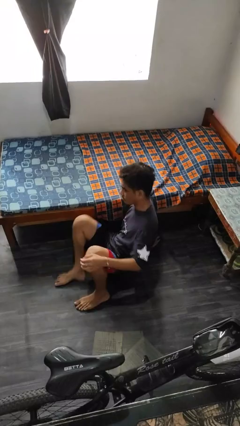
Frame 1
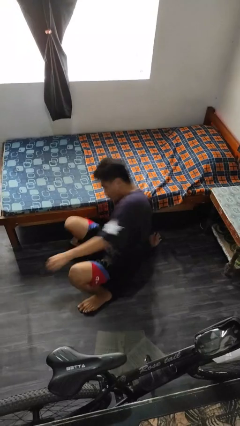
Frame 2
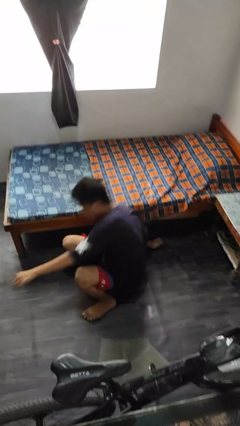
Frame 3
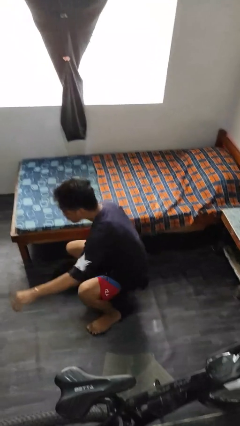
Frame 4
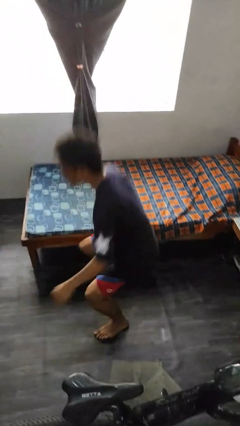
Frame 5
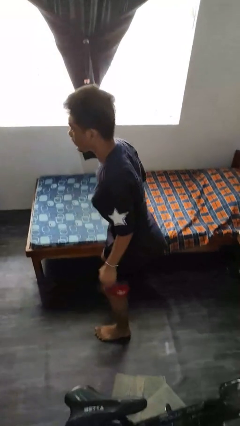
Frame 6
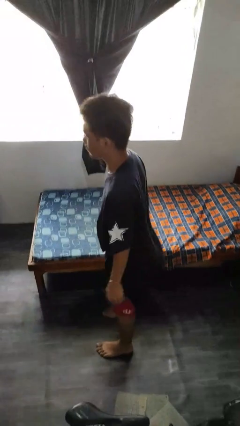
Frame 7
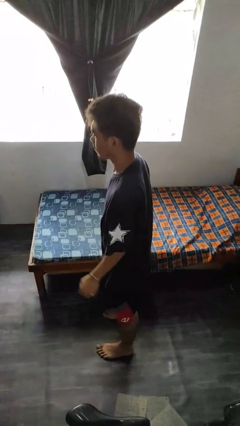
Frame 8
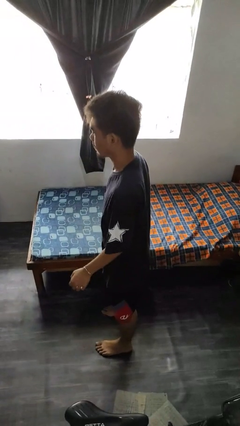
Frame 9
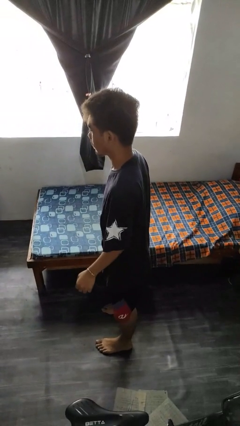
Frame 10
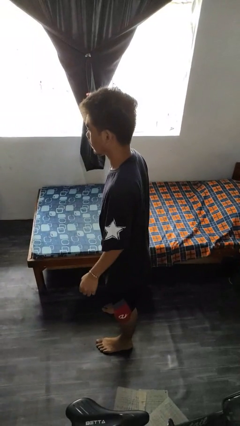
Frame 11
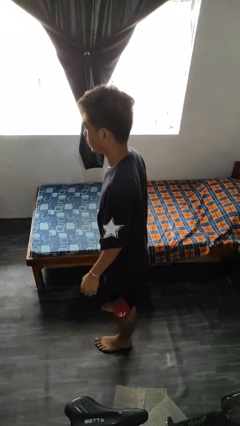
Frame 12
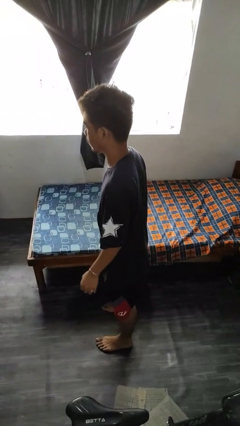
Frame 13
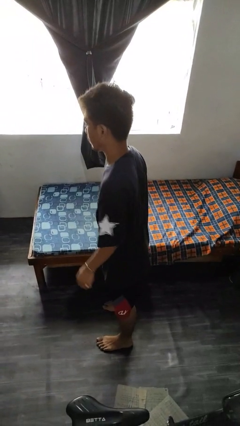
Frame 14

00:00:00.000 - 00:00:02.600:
person stands up from floor

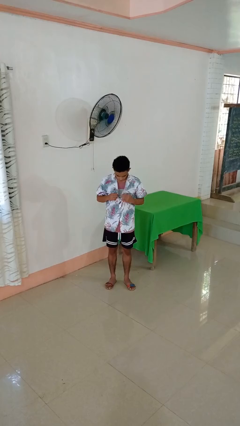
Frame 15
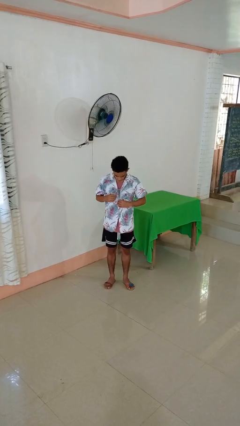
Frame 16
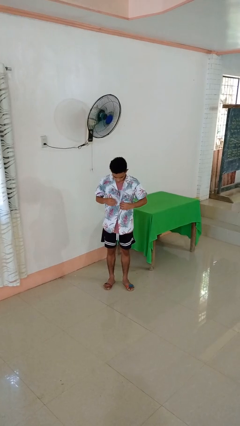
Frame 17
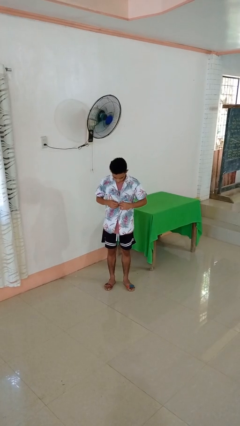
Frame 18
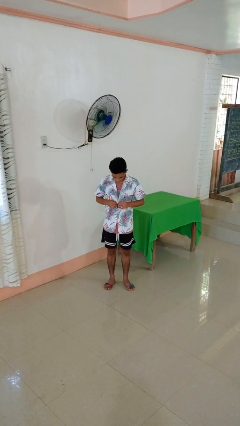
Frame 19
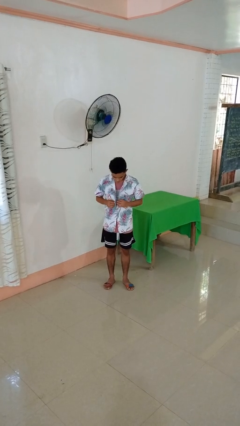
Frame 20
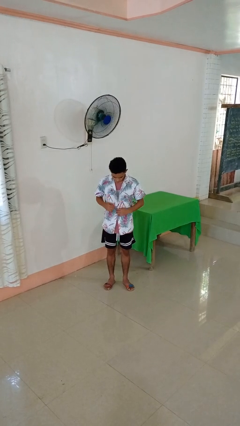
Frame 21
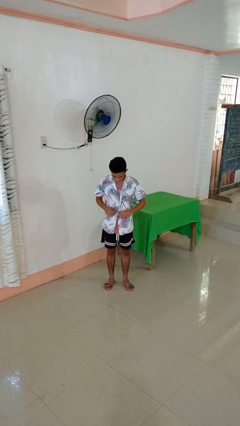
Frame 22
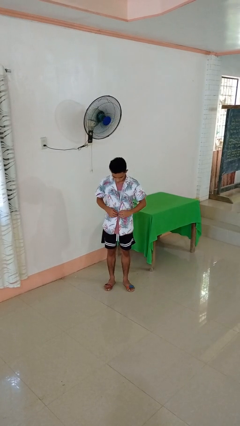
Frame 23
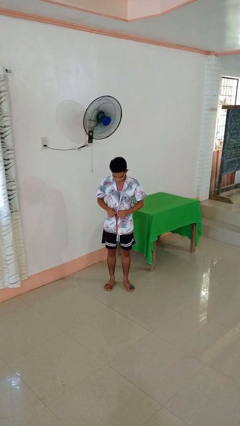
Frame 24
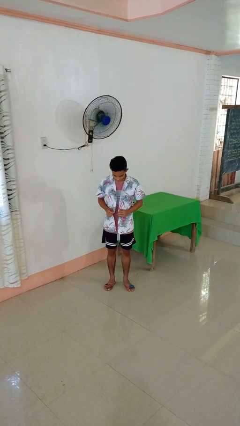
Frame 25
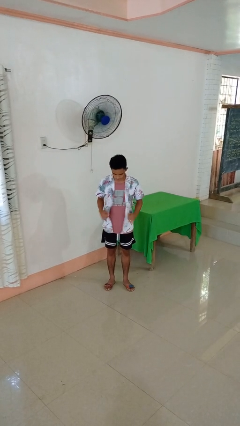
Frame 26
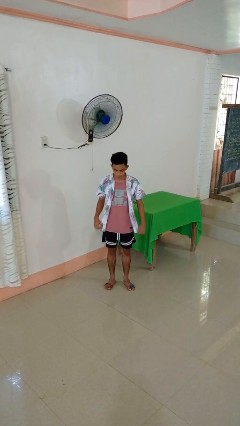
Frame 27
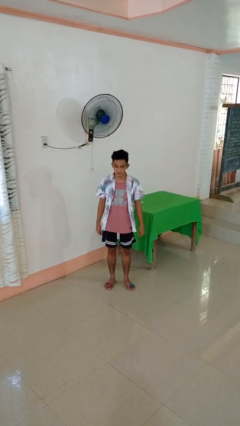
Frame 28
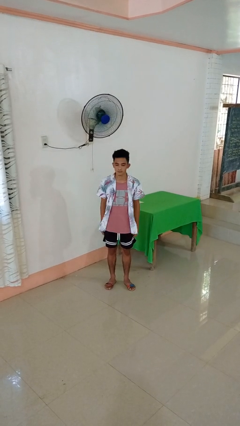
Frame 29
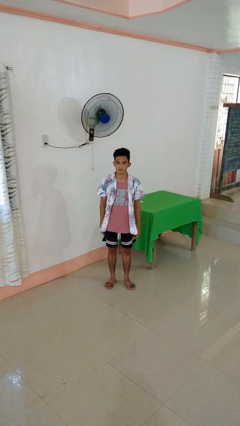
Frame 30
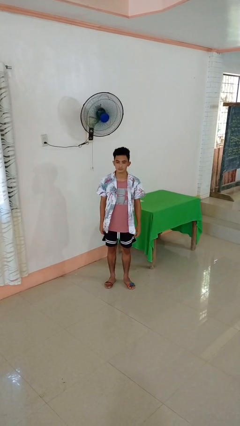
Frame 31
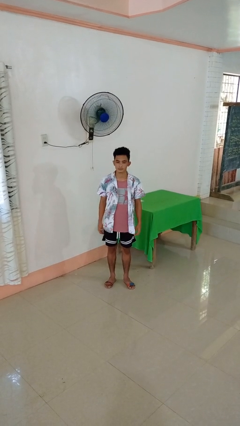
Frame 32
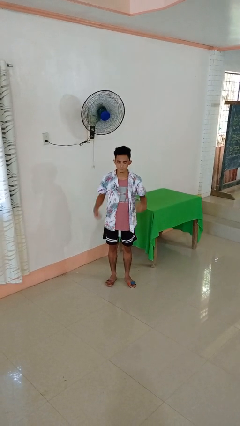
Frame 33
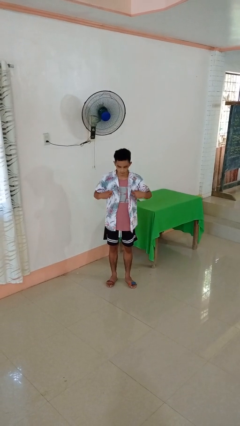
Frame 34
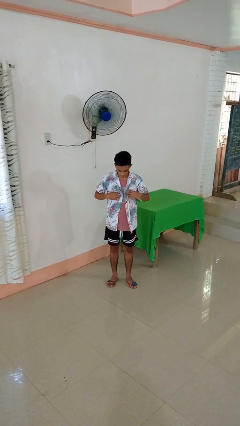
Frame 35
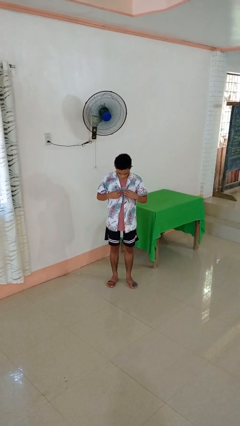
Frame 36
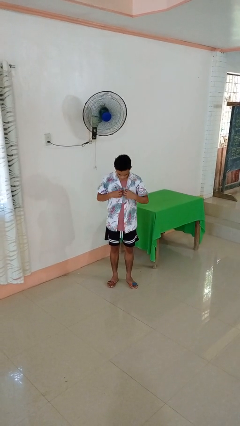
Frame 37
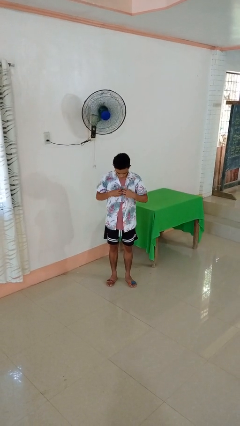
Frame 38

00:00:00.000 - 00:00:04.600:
person unbuttons shirt

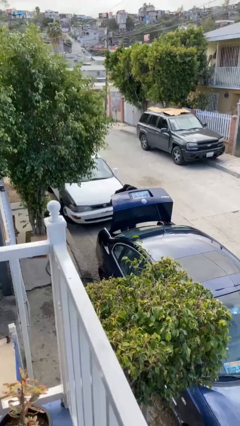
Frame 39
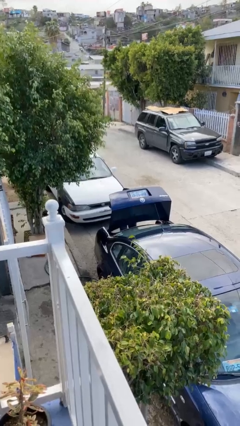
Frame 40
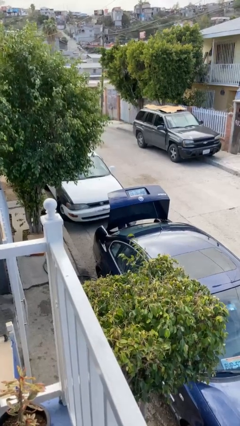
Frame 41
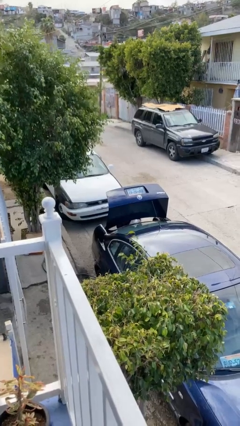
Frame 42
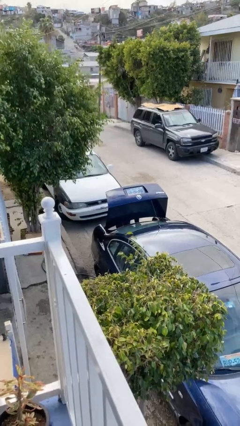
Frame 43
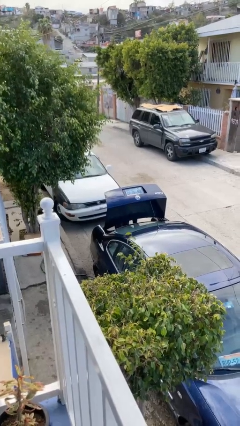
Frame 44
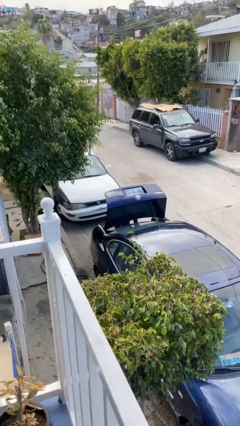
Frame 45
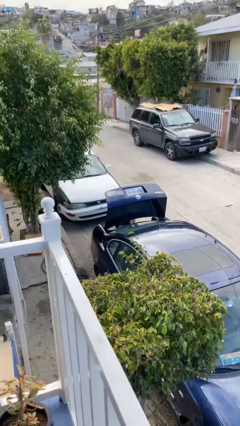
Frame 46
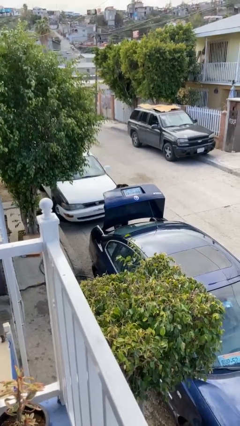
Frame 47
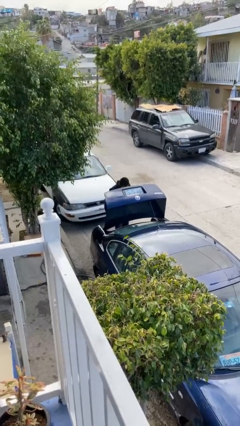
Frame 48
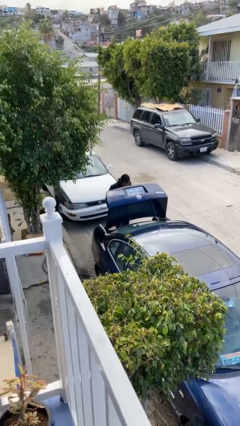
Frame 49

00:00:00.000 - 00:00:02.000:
person loads car

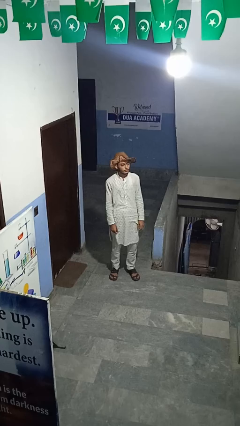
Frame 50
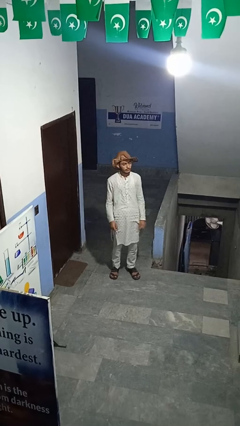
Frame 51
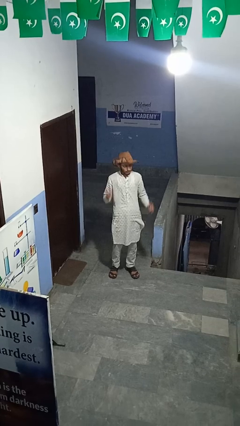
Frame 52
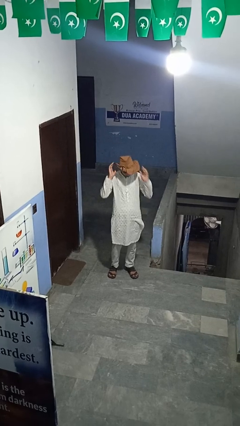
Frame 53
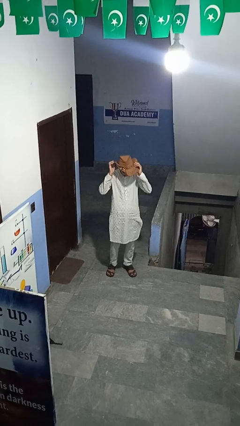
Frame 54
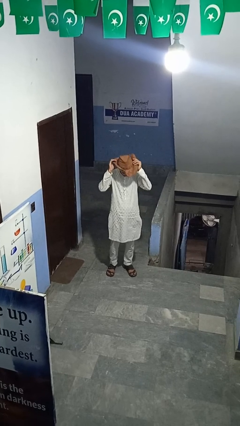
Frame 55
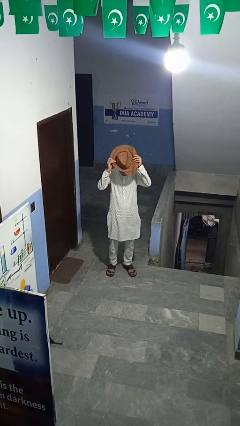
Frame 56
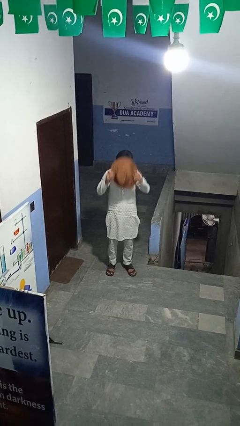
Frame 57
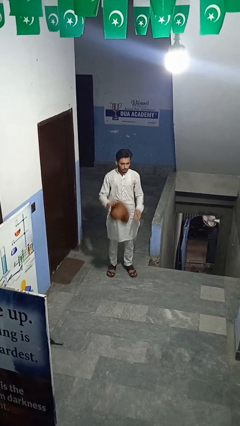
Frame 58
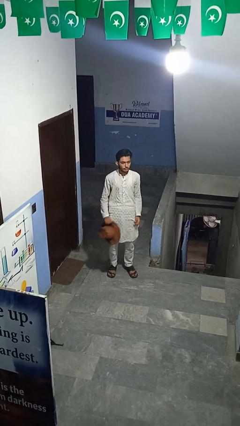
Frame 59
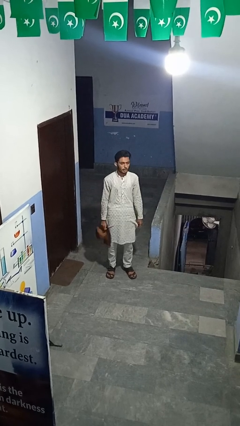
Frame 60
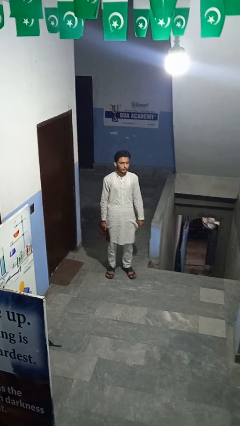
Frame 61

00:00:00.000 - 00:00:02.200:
person takes off hat

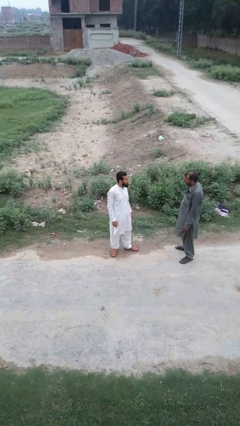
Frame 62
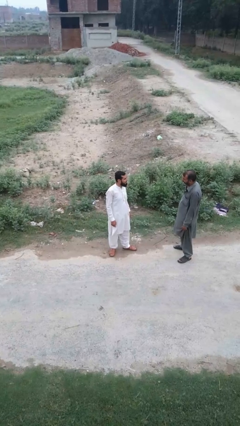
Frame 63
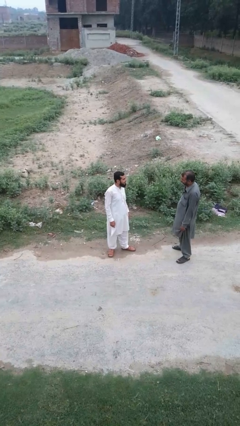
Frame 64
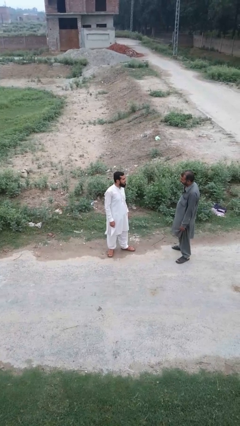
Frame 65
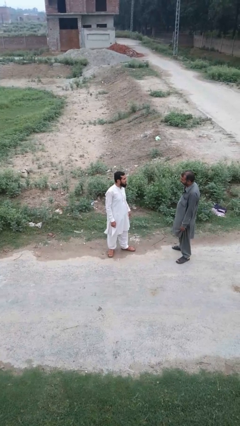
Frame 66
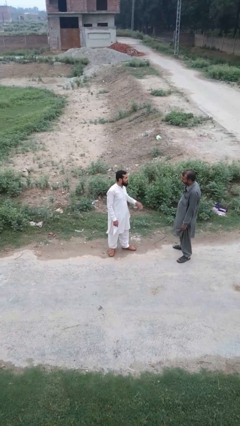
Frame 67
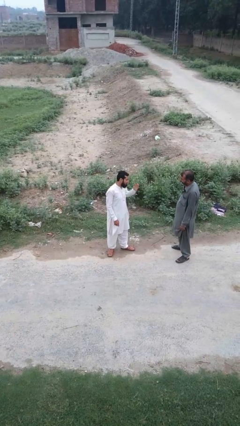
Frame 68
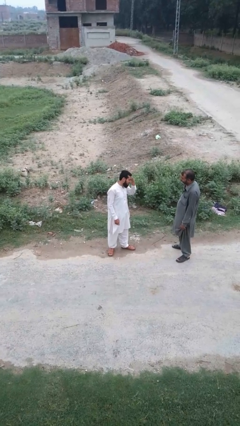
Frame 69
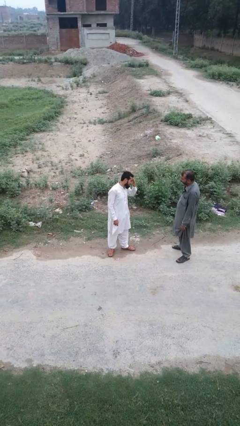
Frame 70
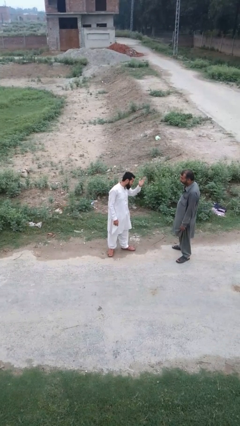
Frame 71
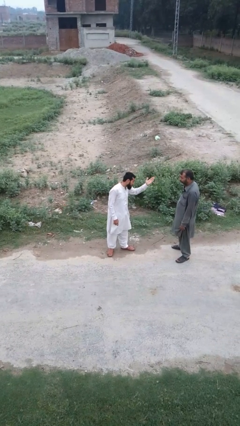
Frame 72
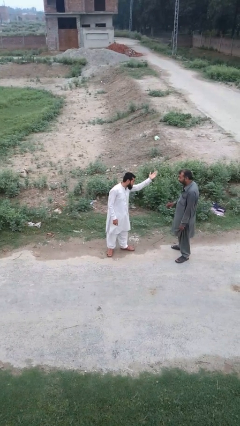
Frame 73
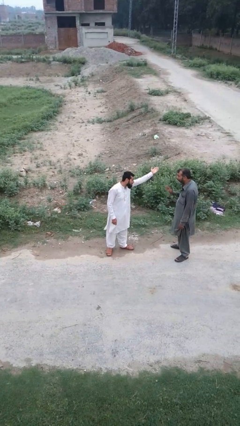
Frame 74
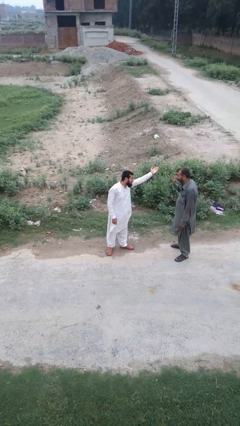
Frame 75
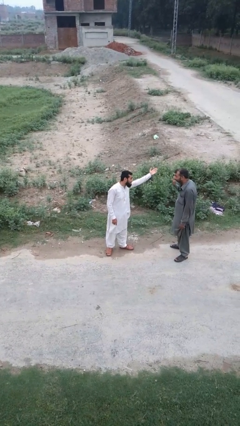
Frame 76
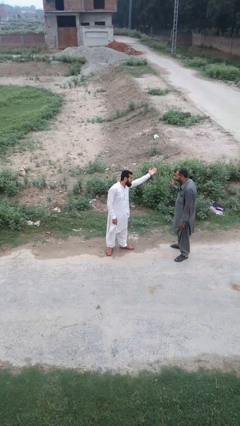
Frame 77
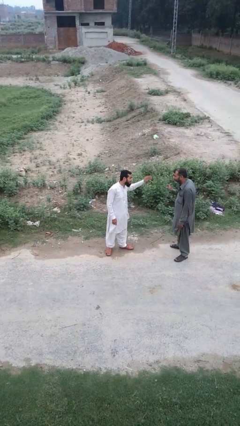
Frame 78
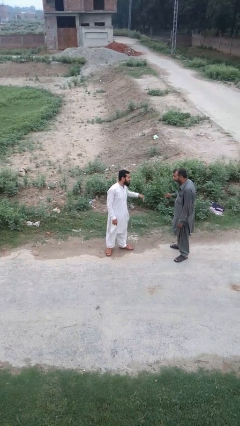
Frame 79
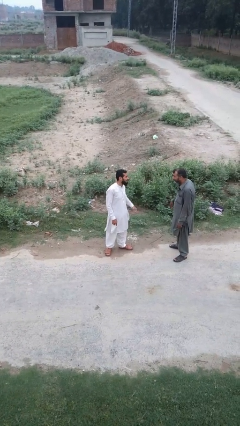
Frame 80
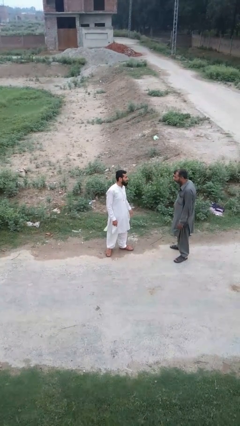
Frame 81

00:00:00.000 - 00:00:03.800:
person shoves person

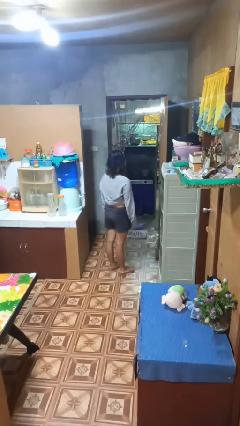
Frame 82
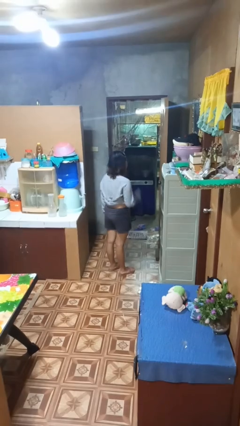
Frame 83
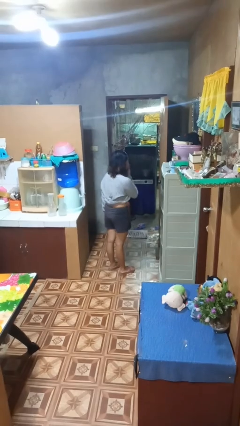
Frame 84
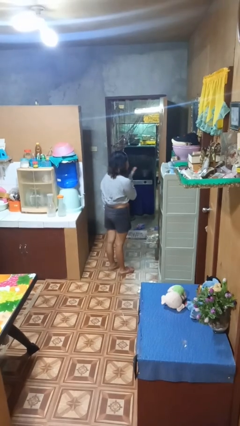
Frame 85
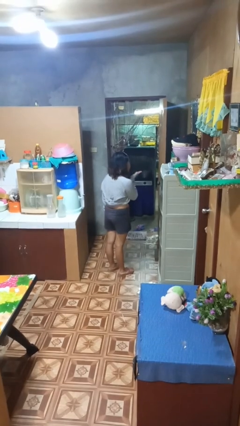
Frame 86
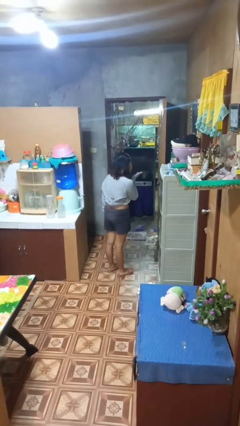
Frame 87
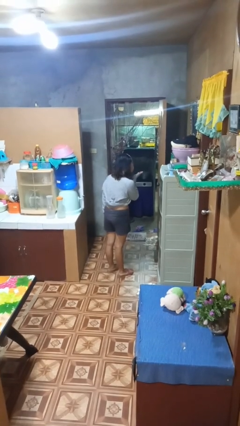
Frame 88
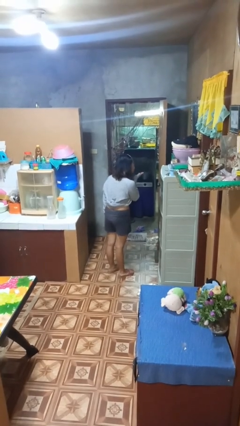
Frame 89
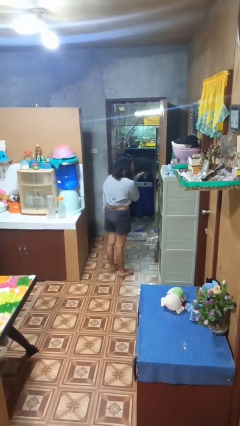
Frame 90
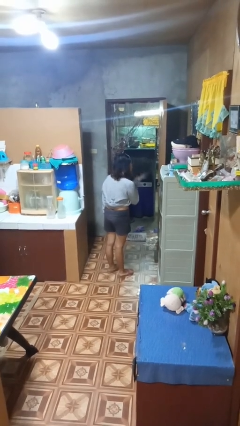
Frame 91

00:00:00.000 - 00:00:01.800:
person gestures blow kiss

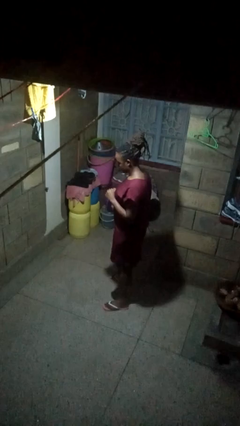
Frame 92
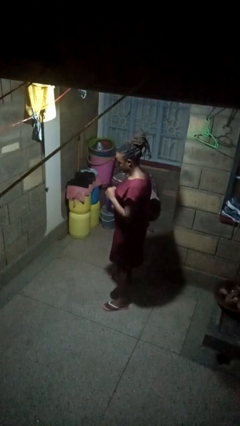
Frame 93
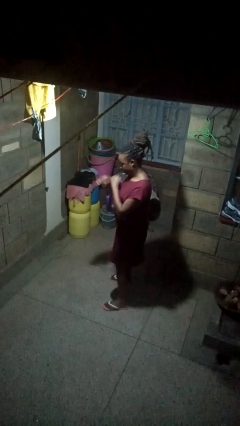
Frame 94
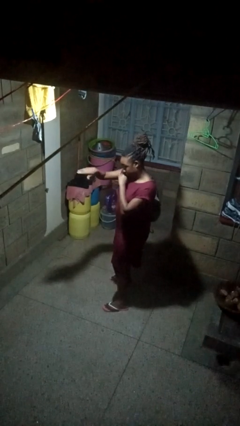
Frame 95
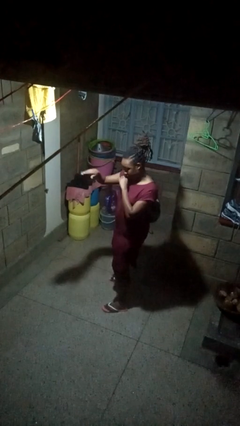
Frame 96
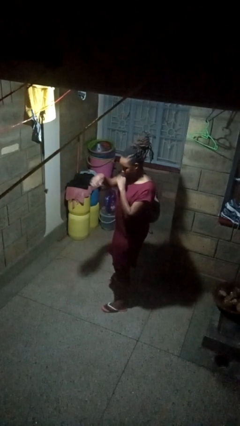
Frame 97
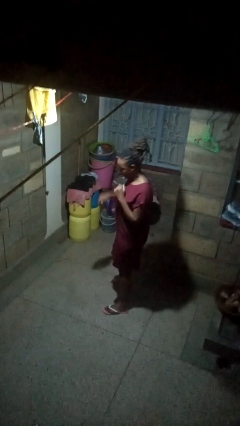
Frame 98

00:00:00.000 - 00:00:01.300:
person karate chop
